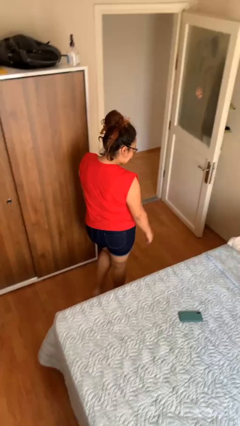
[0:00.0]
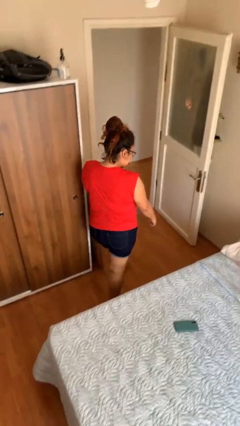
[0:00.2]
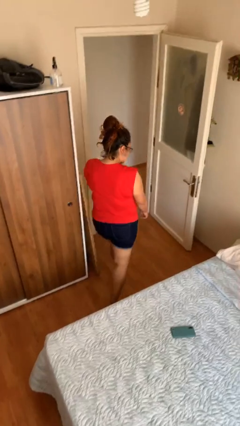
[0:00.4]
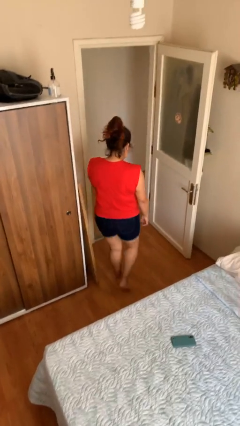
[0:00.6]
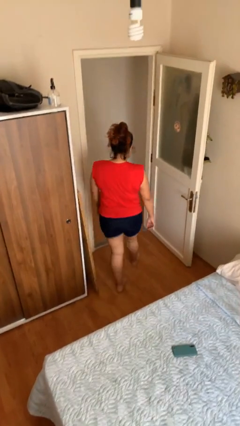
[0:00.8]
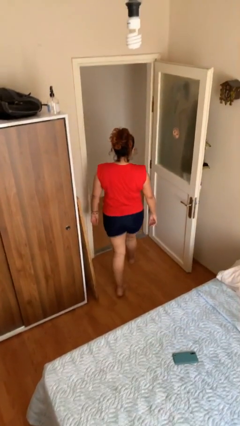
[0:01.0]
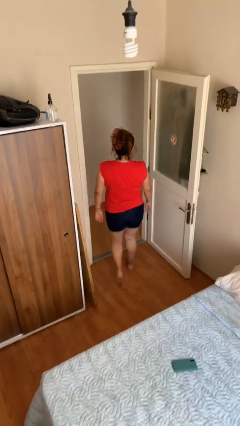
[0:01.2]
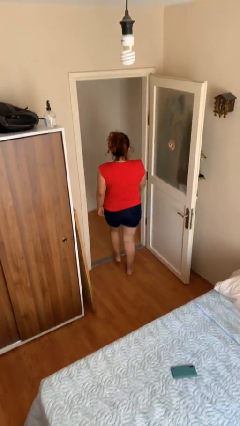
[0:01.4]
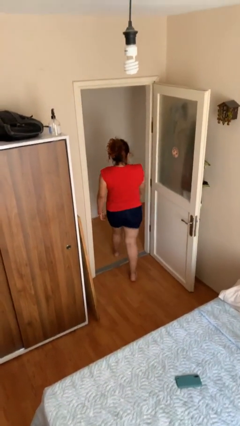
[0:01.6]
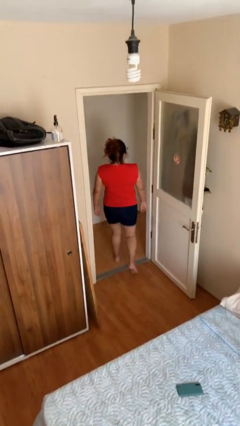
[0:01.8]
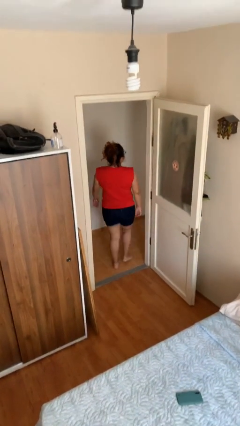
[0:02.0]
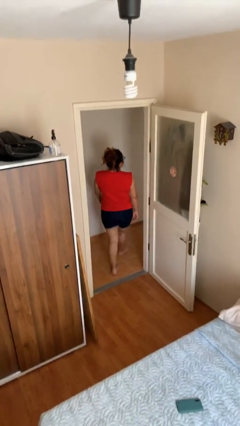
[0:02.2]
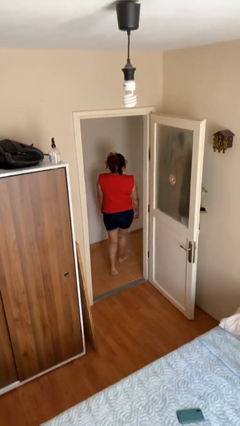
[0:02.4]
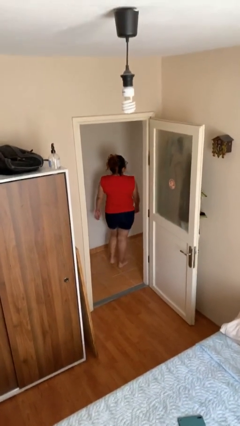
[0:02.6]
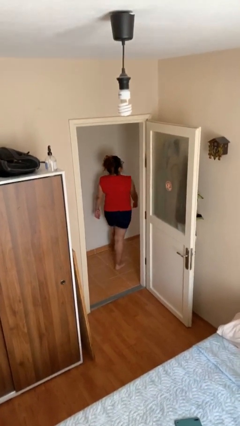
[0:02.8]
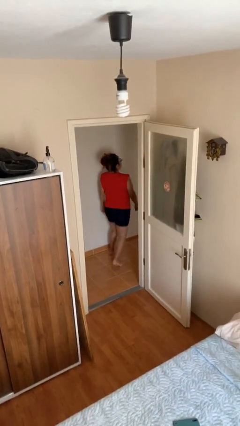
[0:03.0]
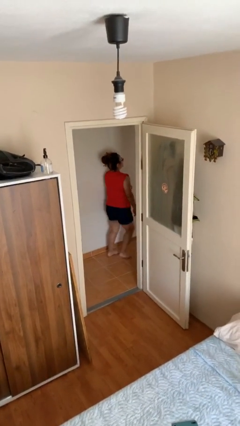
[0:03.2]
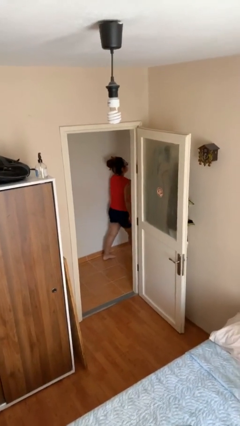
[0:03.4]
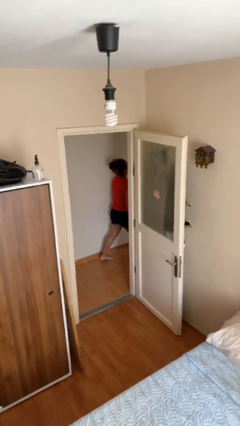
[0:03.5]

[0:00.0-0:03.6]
person exits scene through structure

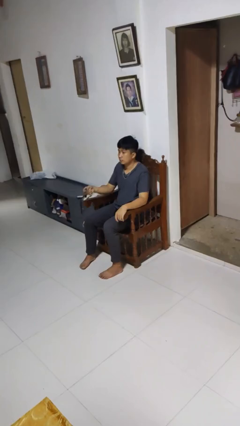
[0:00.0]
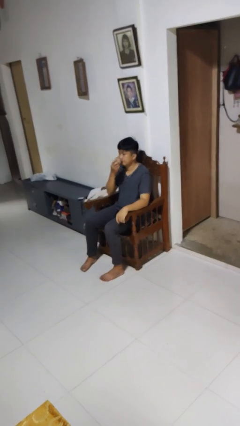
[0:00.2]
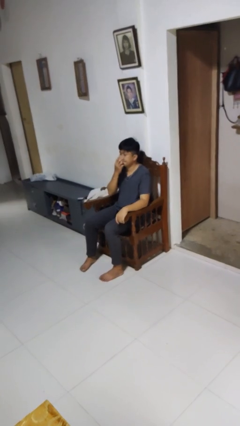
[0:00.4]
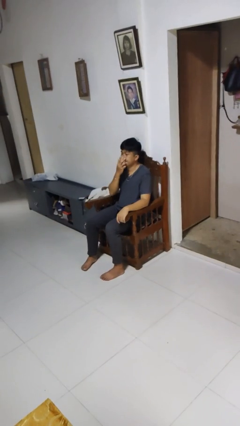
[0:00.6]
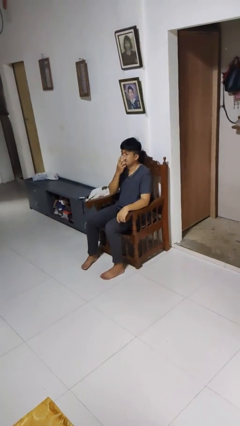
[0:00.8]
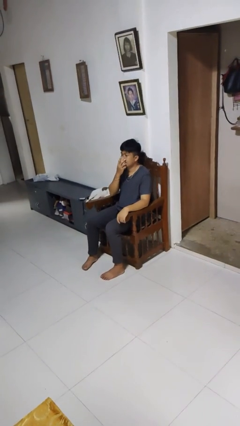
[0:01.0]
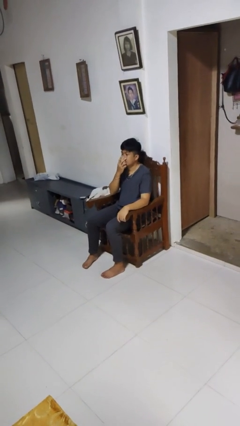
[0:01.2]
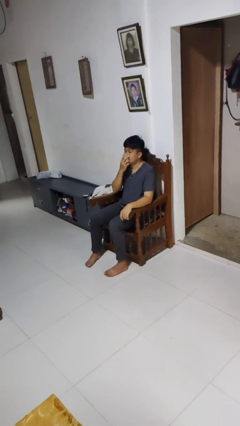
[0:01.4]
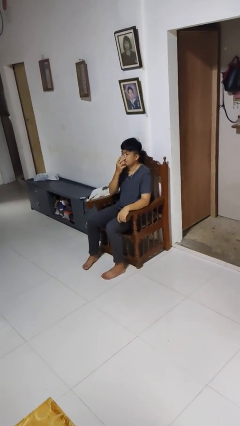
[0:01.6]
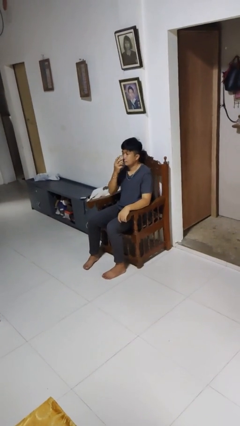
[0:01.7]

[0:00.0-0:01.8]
person blows nose

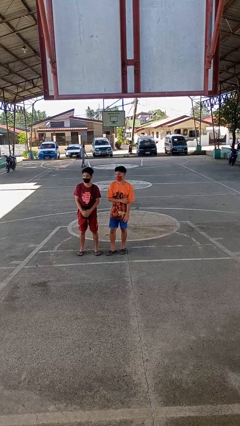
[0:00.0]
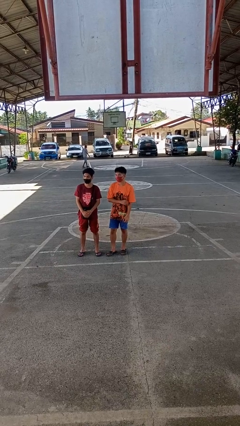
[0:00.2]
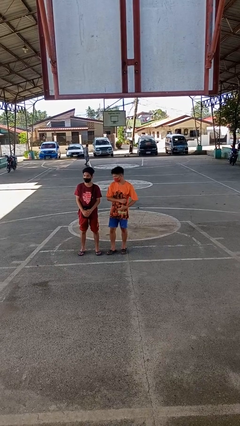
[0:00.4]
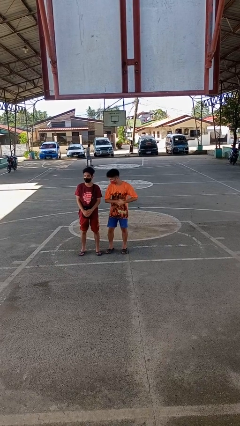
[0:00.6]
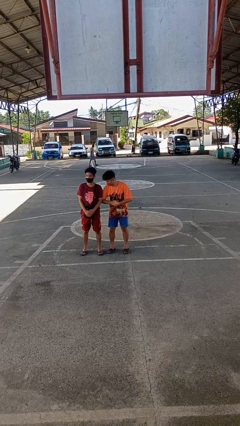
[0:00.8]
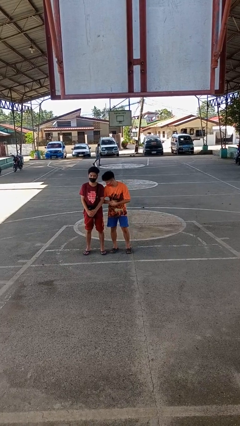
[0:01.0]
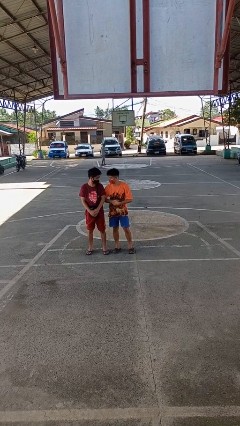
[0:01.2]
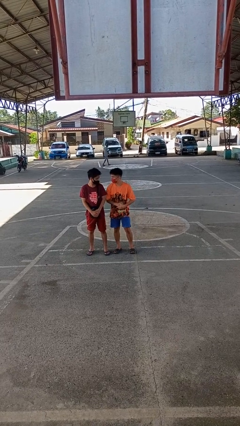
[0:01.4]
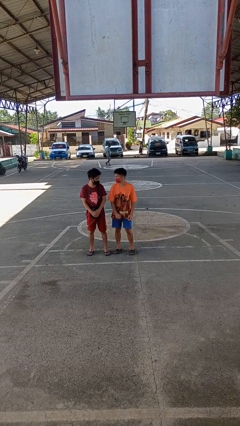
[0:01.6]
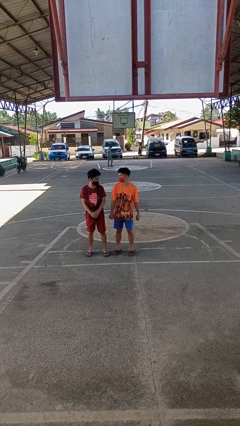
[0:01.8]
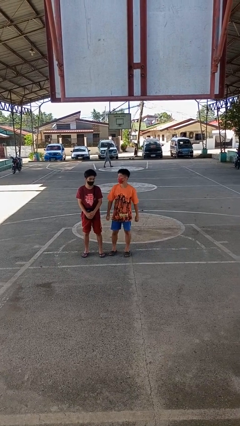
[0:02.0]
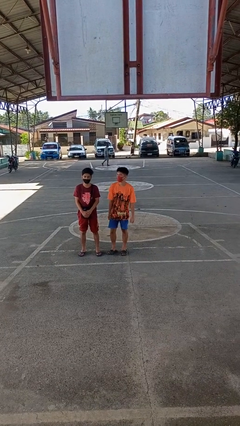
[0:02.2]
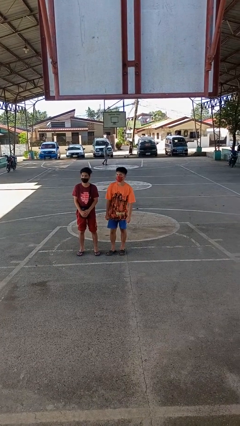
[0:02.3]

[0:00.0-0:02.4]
person nudges person with elbow

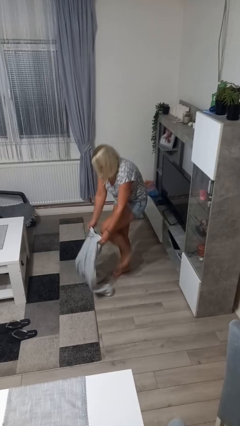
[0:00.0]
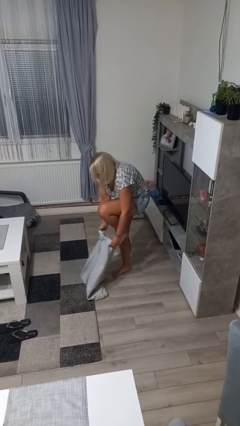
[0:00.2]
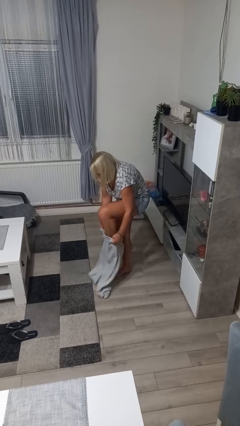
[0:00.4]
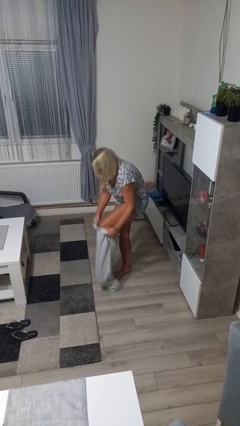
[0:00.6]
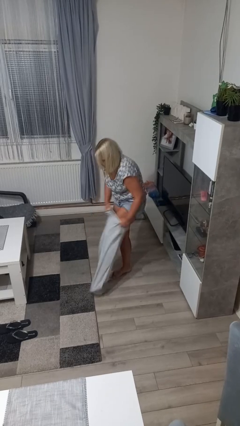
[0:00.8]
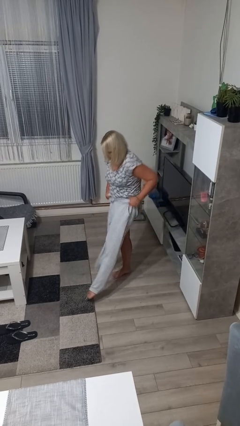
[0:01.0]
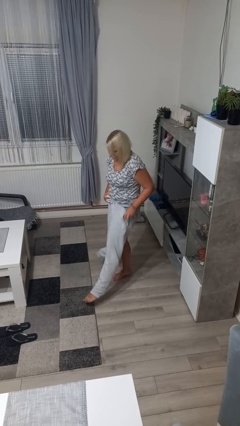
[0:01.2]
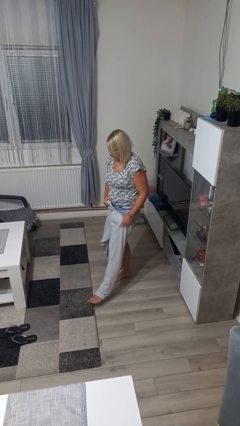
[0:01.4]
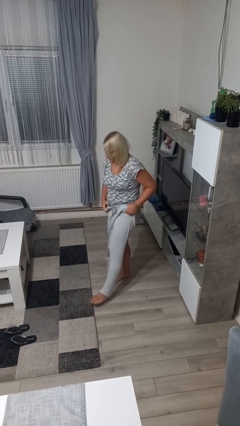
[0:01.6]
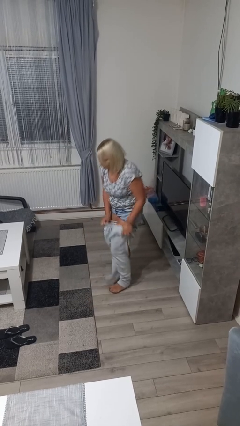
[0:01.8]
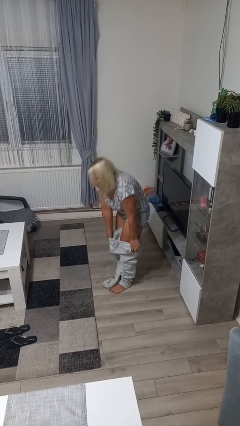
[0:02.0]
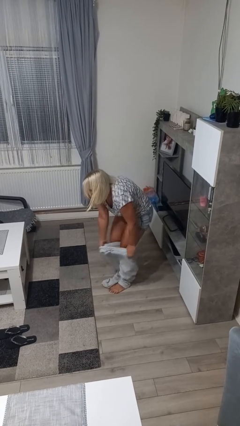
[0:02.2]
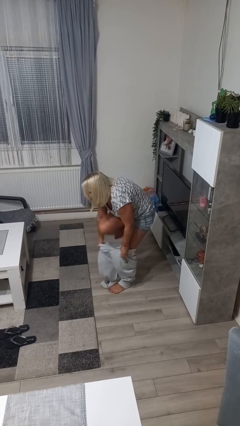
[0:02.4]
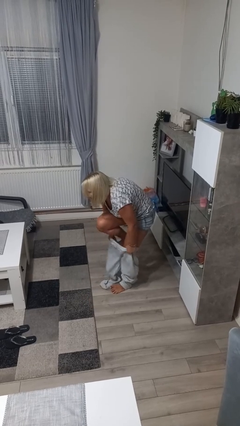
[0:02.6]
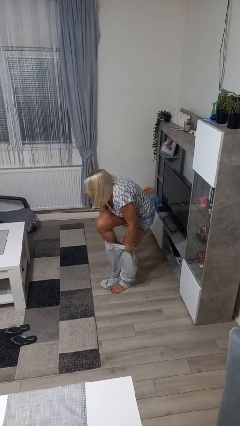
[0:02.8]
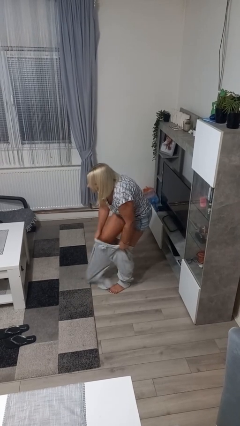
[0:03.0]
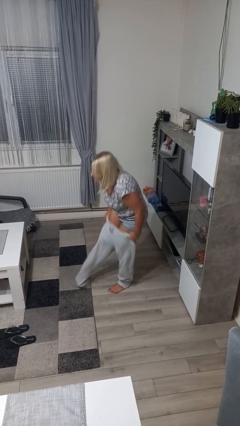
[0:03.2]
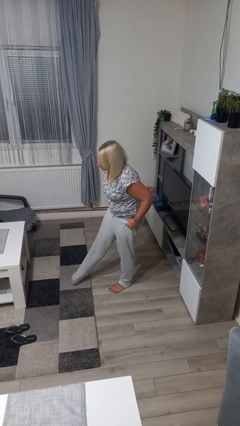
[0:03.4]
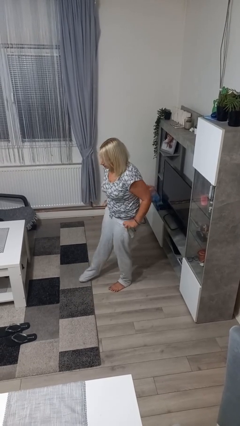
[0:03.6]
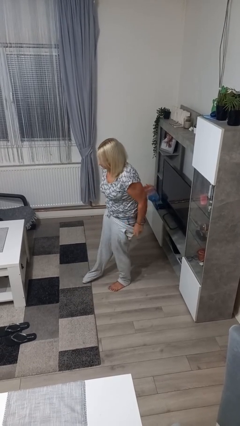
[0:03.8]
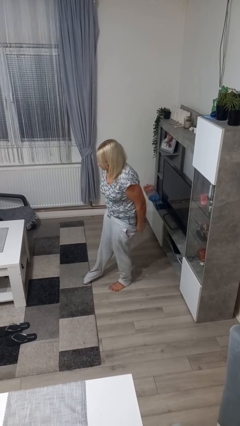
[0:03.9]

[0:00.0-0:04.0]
person puts on pants

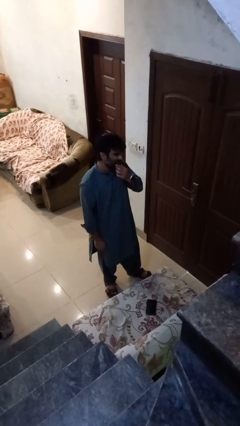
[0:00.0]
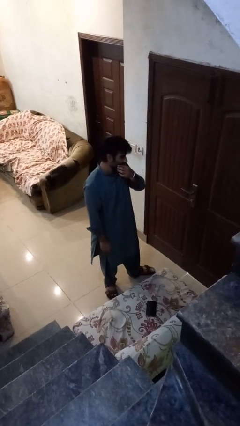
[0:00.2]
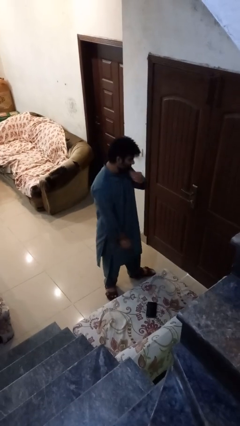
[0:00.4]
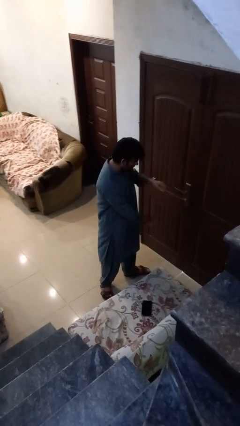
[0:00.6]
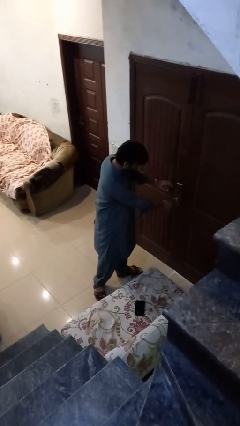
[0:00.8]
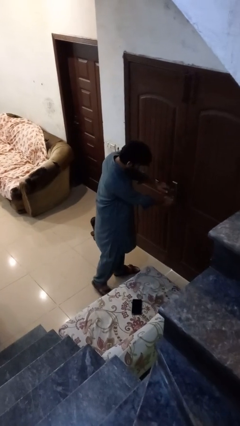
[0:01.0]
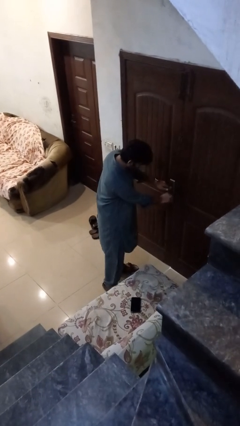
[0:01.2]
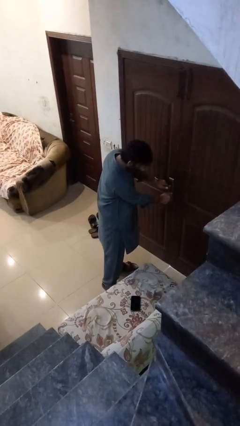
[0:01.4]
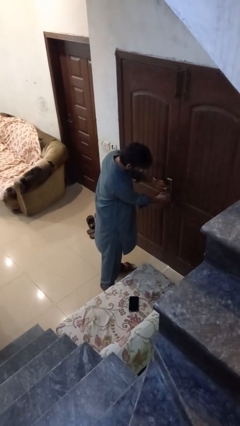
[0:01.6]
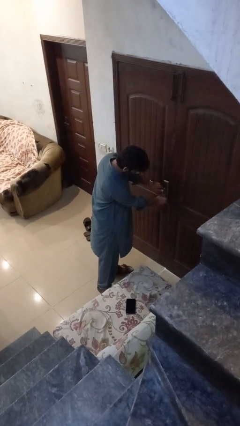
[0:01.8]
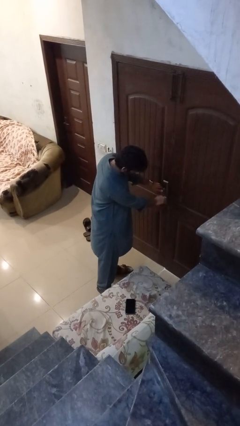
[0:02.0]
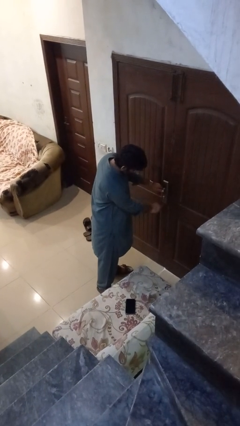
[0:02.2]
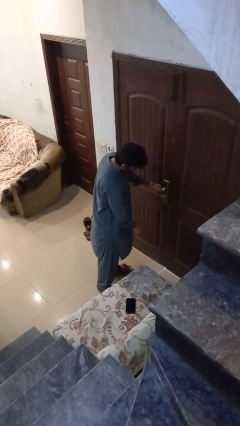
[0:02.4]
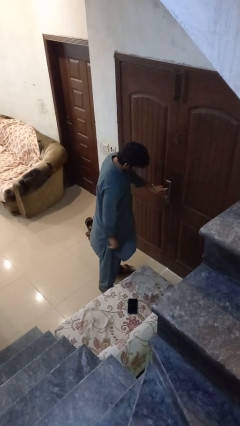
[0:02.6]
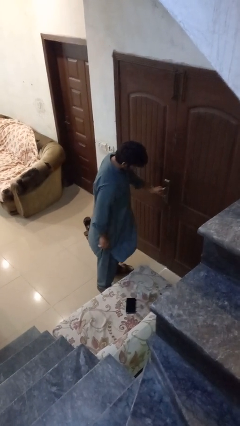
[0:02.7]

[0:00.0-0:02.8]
person unlocks door with keys

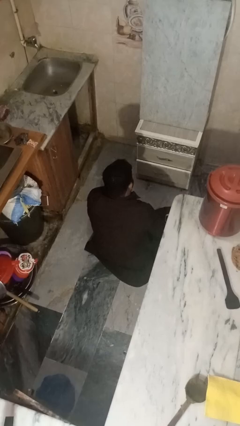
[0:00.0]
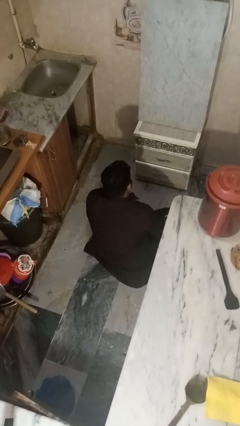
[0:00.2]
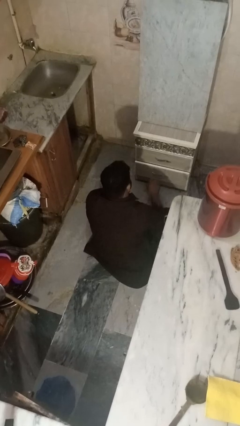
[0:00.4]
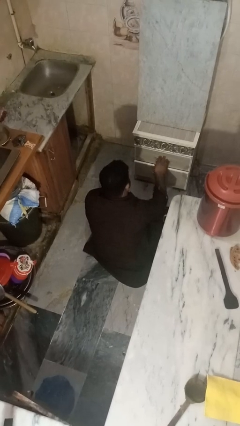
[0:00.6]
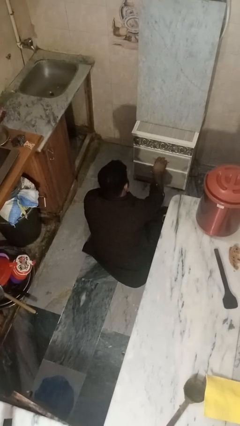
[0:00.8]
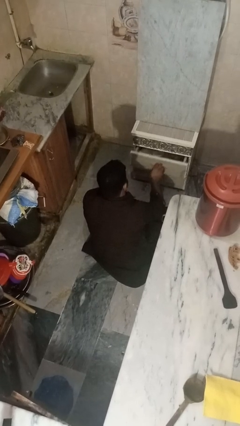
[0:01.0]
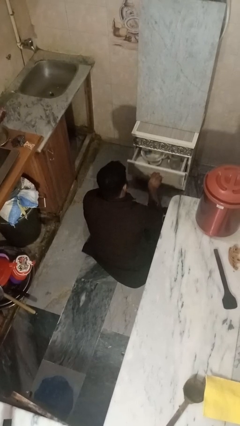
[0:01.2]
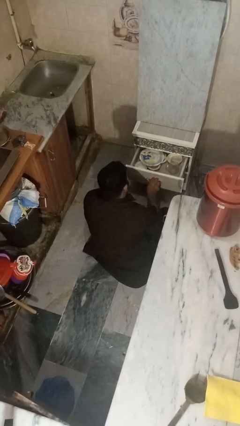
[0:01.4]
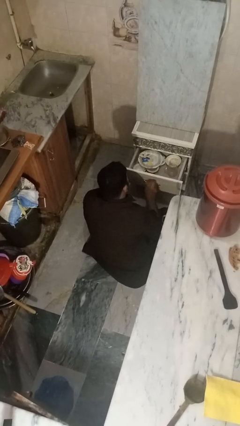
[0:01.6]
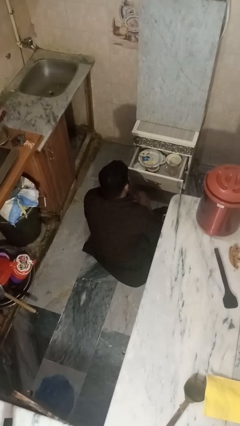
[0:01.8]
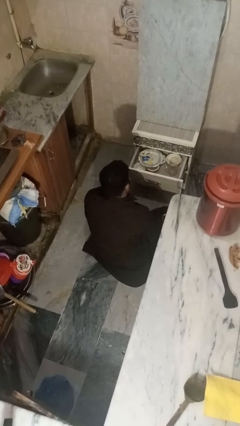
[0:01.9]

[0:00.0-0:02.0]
person opens kitchen drawer

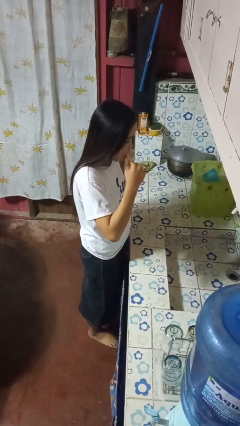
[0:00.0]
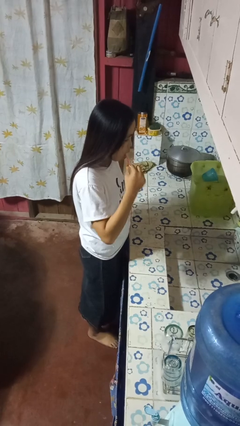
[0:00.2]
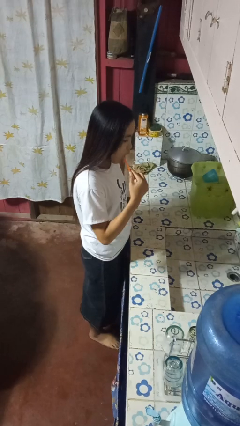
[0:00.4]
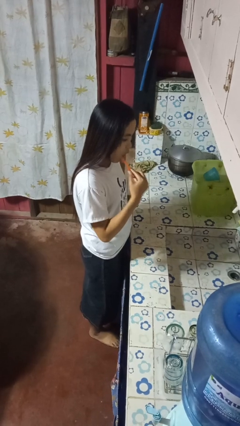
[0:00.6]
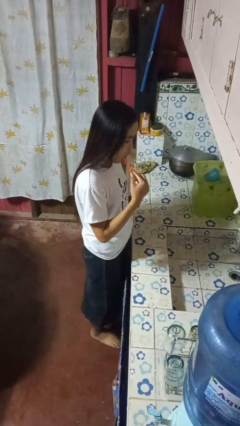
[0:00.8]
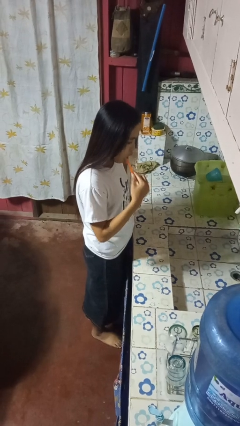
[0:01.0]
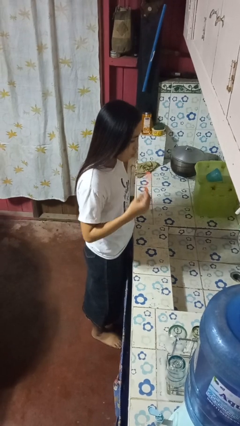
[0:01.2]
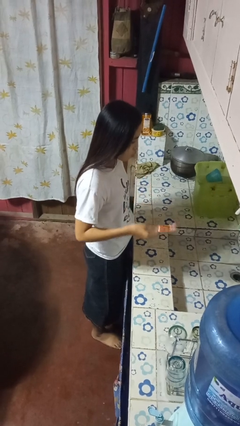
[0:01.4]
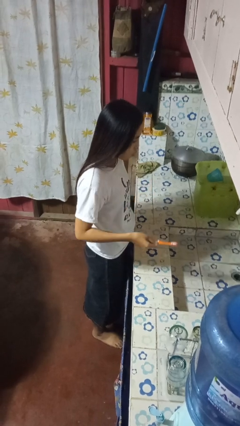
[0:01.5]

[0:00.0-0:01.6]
person brushes teeth
